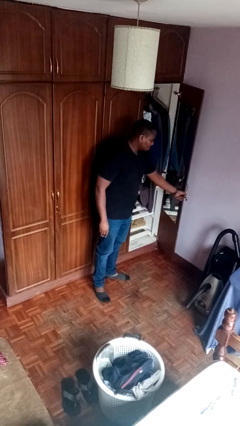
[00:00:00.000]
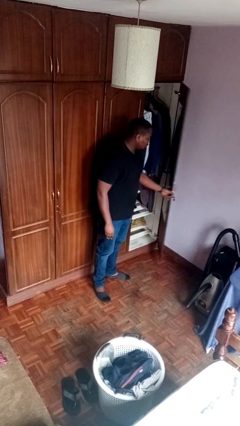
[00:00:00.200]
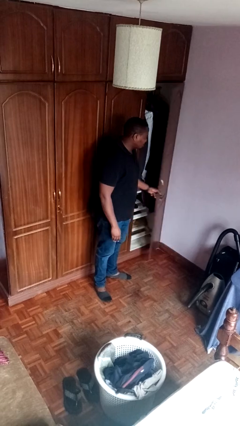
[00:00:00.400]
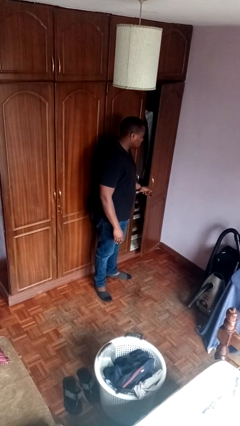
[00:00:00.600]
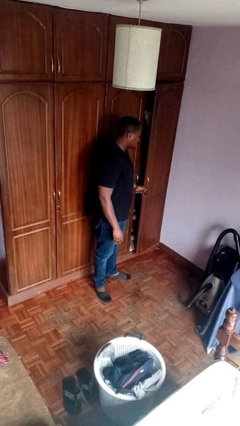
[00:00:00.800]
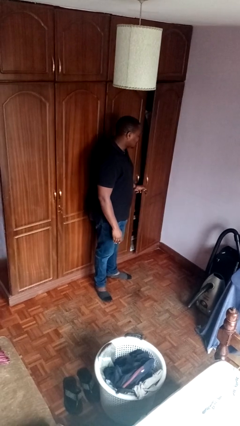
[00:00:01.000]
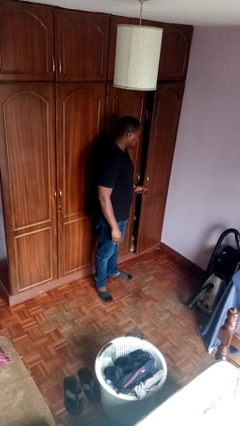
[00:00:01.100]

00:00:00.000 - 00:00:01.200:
person closes closet door

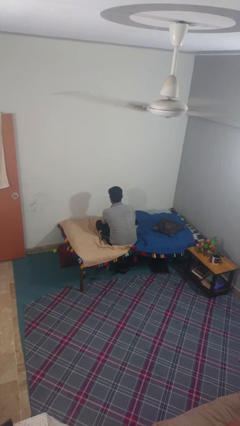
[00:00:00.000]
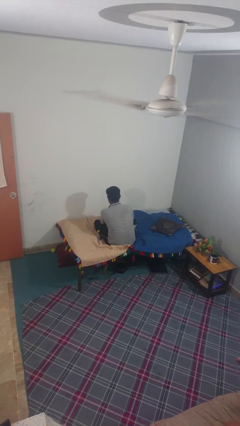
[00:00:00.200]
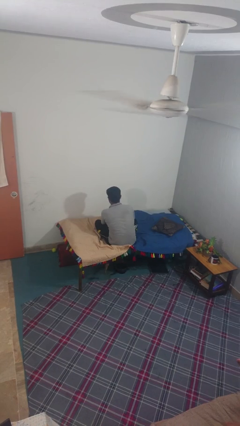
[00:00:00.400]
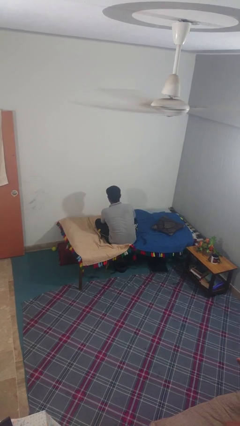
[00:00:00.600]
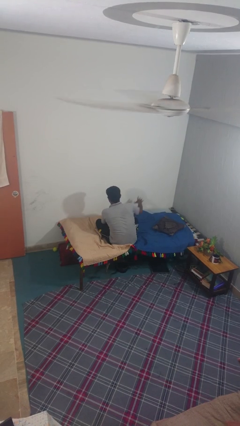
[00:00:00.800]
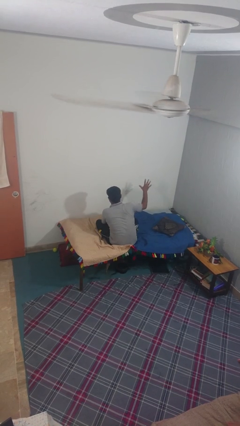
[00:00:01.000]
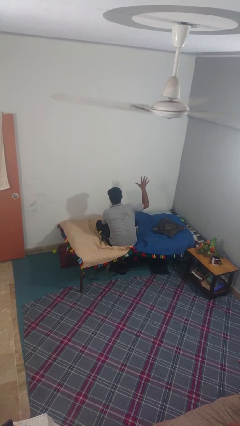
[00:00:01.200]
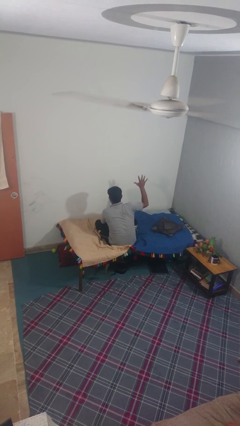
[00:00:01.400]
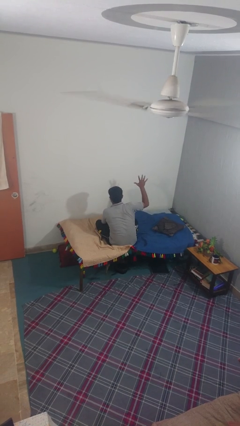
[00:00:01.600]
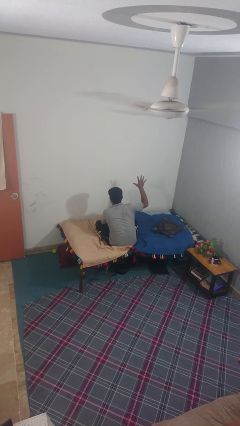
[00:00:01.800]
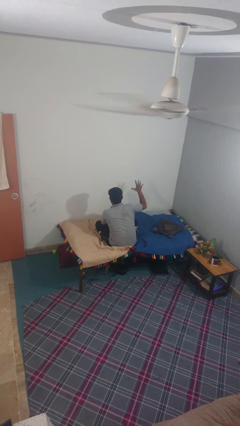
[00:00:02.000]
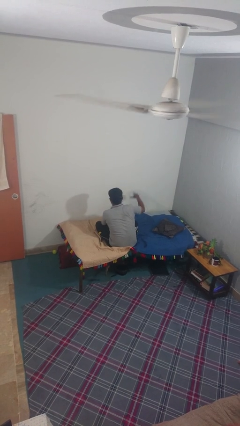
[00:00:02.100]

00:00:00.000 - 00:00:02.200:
person gestures number five

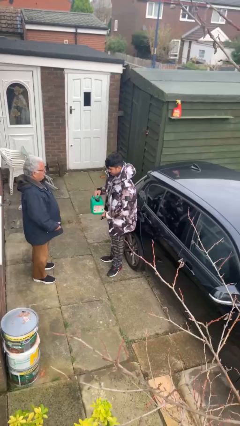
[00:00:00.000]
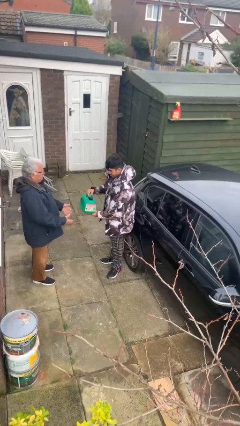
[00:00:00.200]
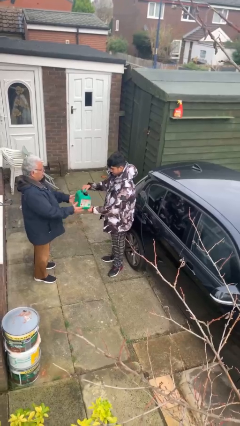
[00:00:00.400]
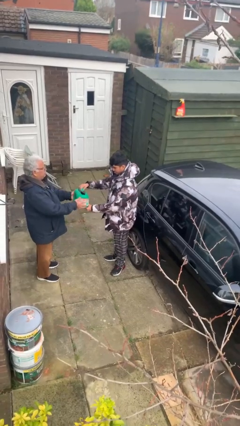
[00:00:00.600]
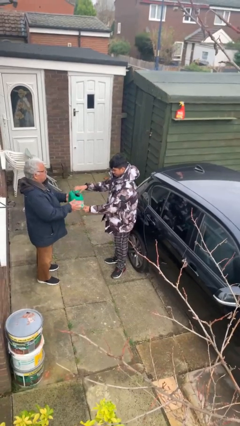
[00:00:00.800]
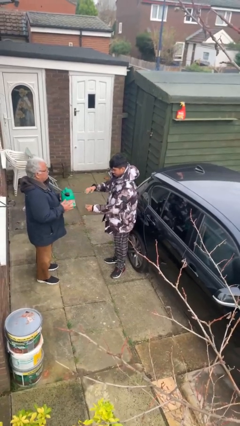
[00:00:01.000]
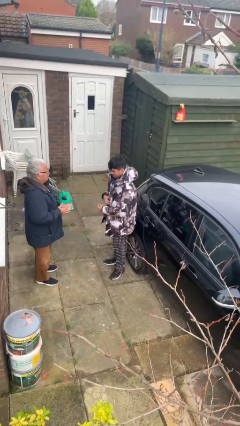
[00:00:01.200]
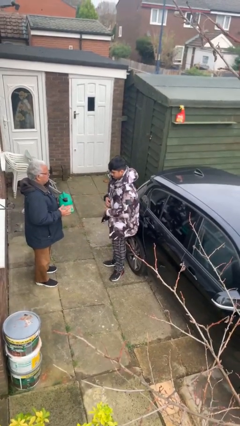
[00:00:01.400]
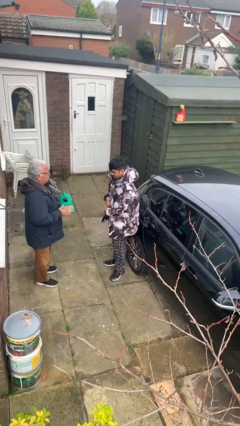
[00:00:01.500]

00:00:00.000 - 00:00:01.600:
person transfers object to person

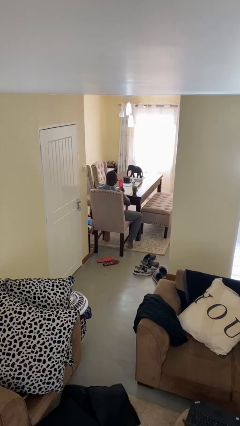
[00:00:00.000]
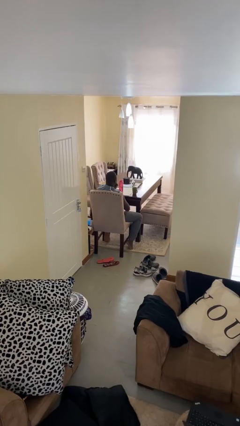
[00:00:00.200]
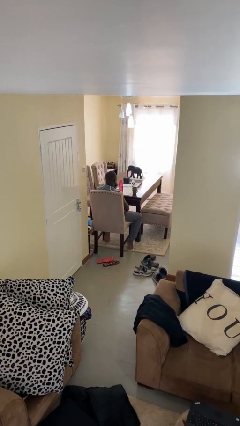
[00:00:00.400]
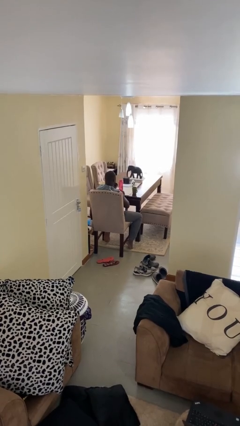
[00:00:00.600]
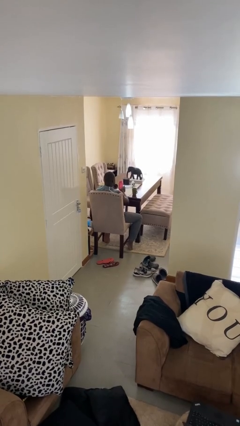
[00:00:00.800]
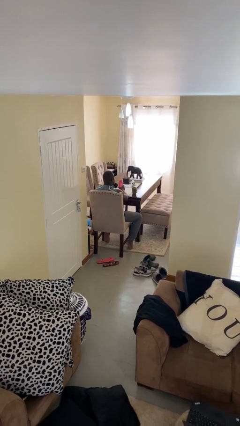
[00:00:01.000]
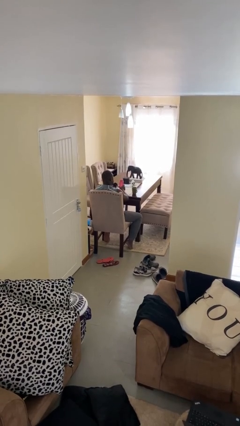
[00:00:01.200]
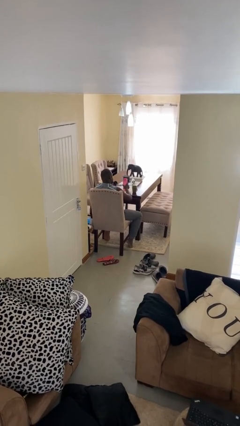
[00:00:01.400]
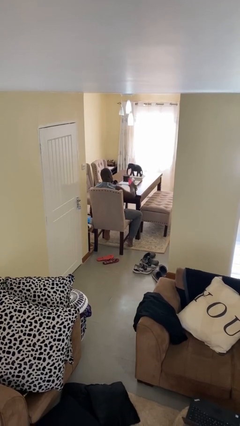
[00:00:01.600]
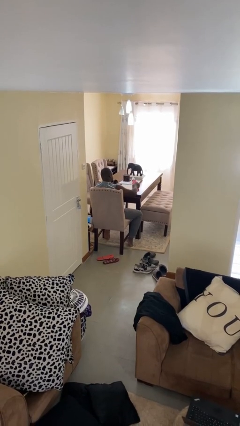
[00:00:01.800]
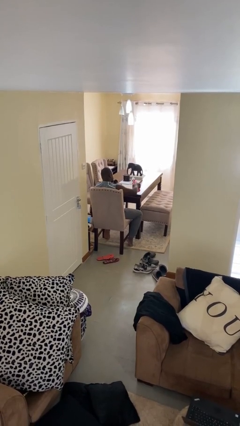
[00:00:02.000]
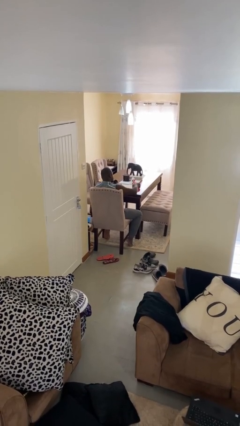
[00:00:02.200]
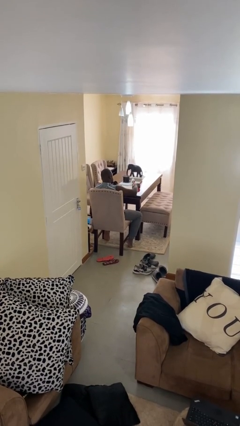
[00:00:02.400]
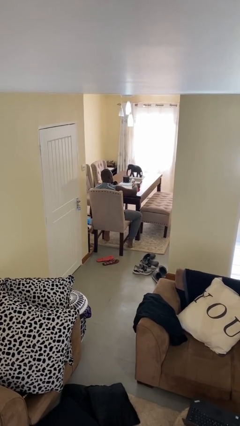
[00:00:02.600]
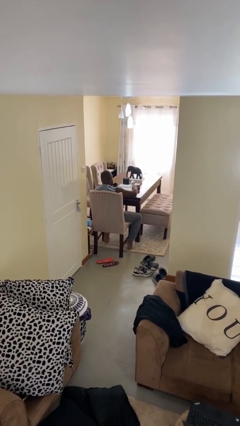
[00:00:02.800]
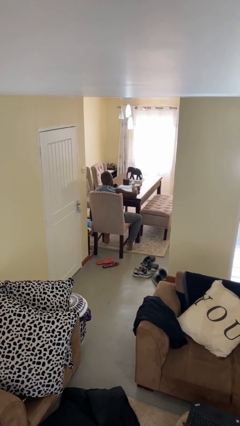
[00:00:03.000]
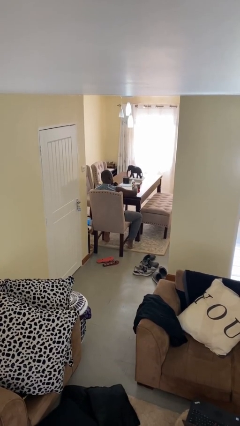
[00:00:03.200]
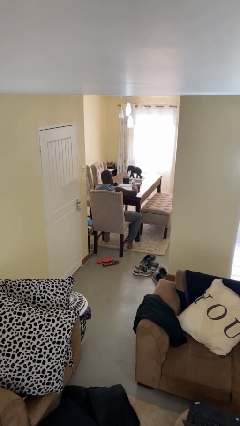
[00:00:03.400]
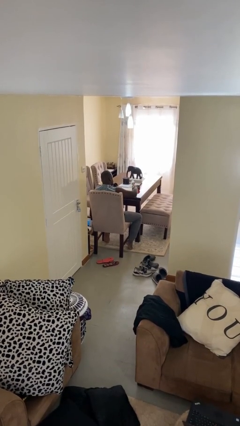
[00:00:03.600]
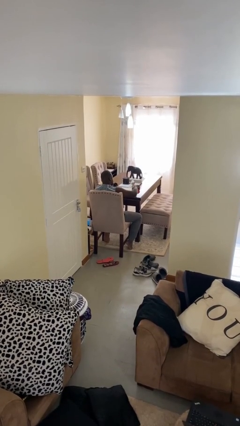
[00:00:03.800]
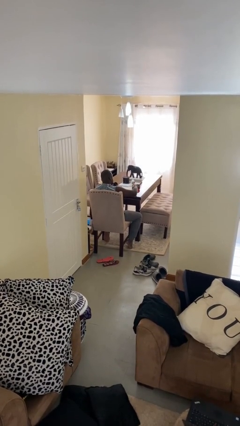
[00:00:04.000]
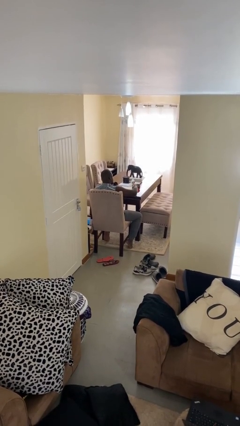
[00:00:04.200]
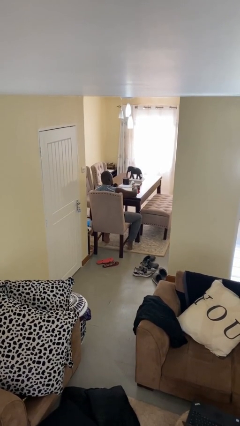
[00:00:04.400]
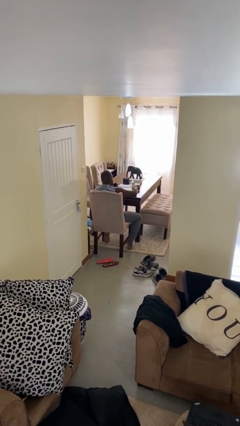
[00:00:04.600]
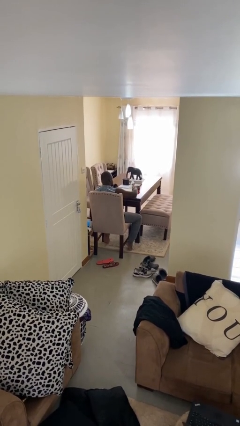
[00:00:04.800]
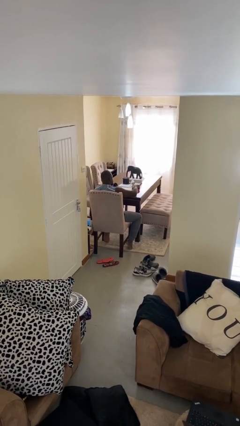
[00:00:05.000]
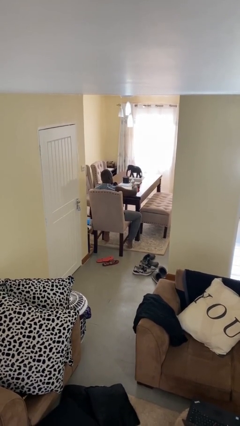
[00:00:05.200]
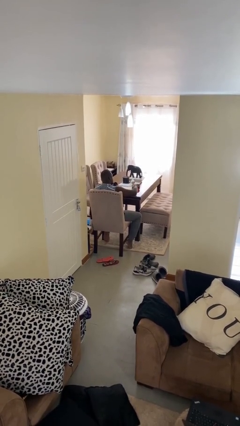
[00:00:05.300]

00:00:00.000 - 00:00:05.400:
person pours liquid into cup

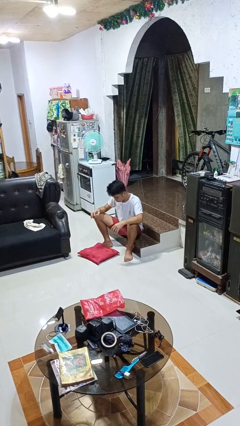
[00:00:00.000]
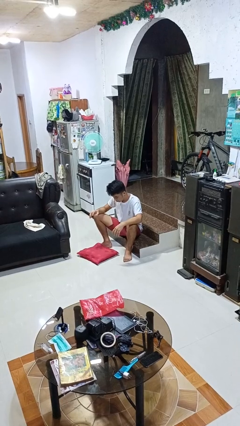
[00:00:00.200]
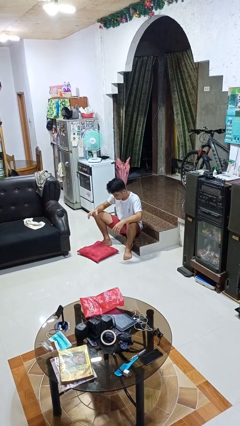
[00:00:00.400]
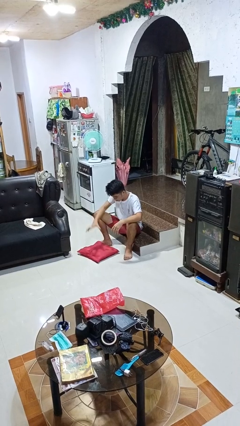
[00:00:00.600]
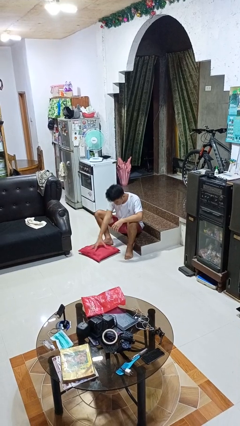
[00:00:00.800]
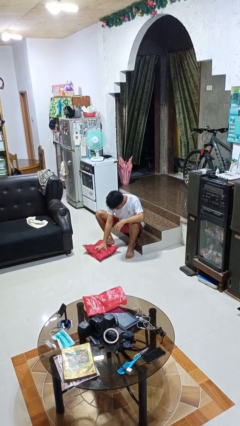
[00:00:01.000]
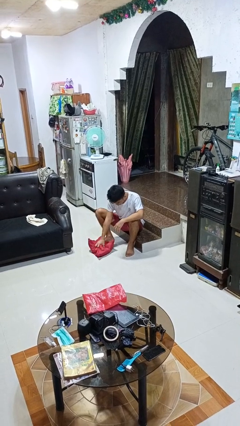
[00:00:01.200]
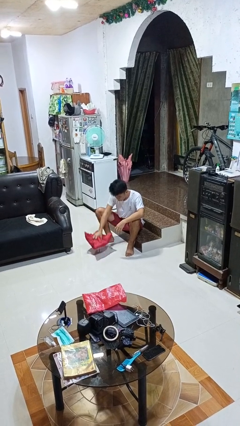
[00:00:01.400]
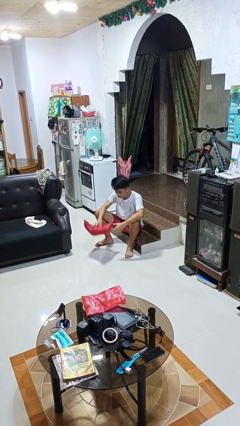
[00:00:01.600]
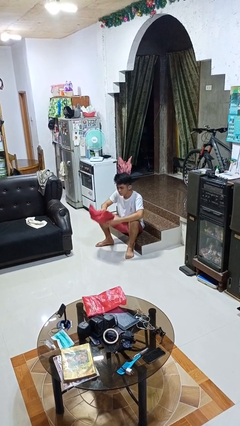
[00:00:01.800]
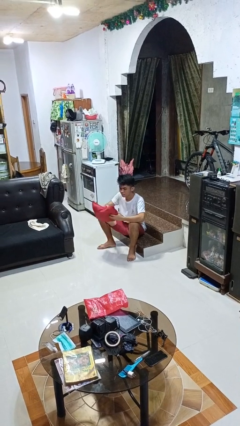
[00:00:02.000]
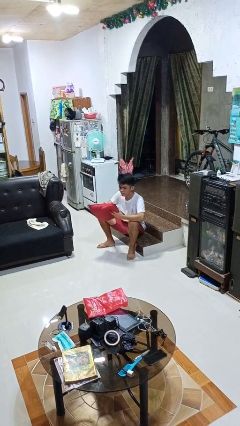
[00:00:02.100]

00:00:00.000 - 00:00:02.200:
person picks up object from floor

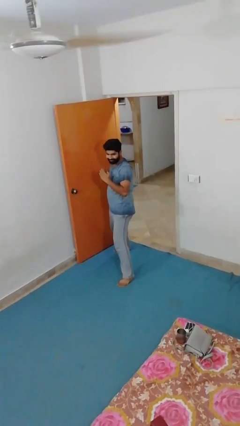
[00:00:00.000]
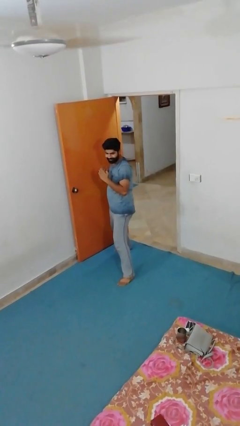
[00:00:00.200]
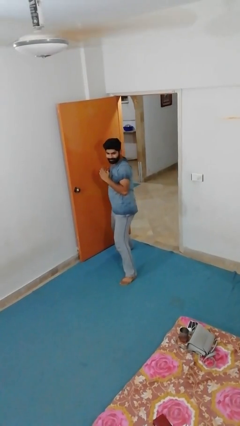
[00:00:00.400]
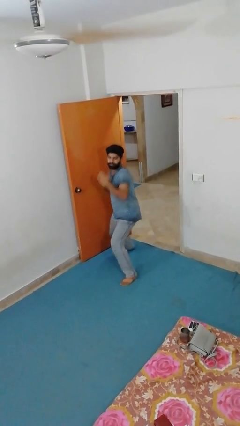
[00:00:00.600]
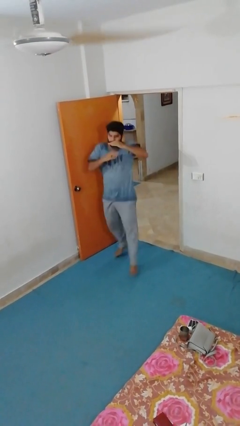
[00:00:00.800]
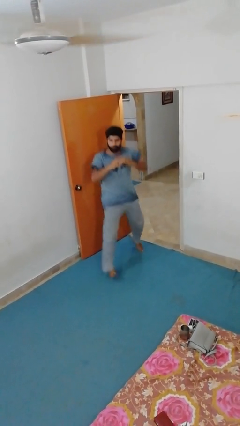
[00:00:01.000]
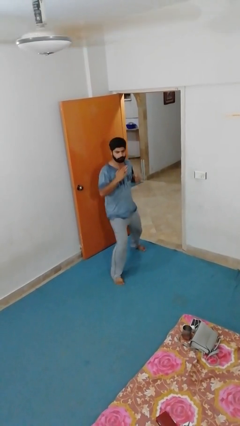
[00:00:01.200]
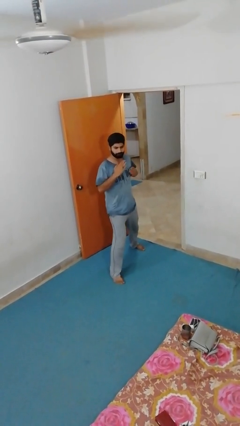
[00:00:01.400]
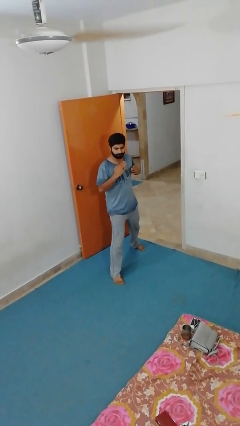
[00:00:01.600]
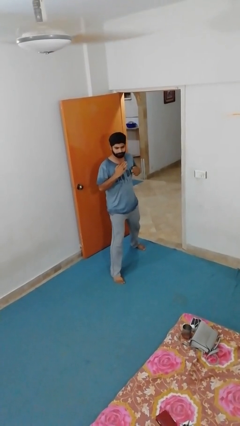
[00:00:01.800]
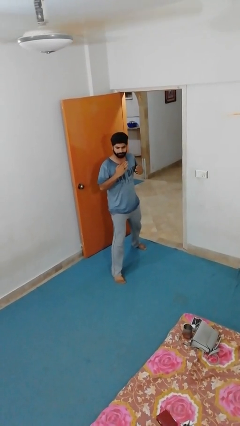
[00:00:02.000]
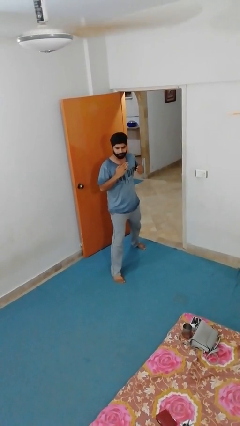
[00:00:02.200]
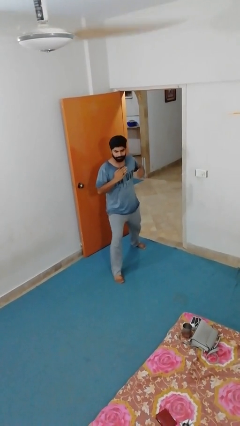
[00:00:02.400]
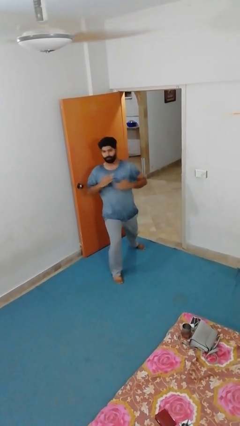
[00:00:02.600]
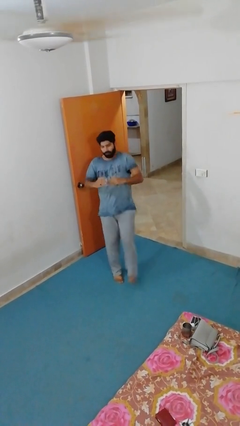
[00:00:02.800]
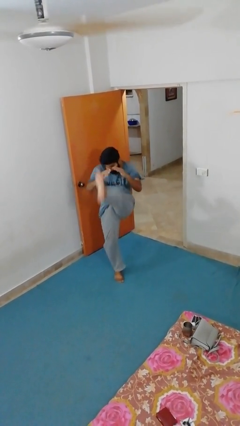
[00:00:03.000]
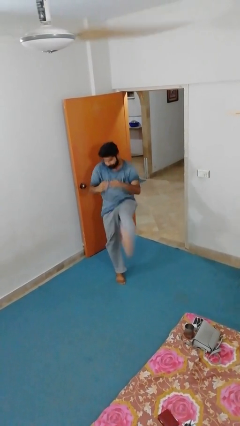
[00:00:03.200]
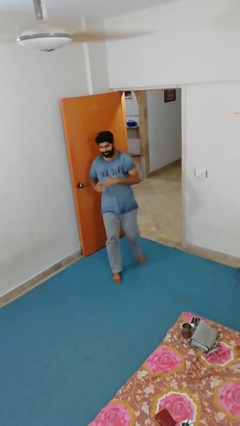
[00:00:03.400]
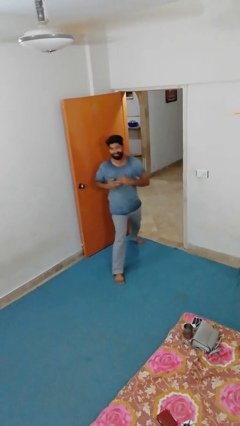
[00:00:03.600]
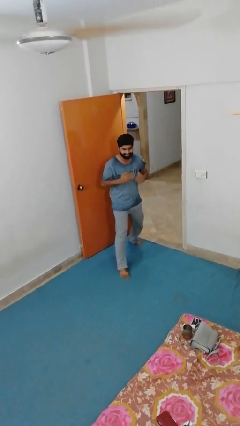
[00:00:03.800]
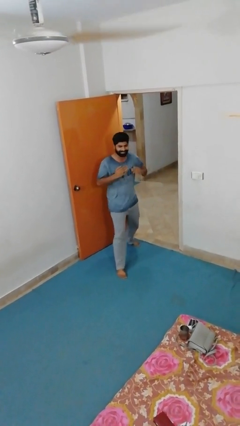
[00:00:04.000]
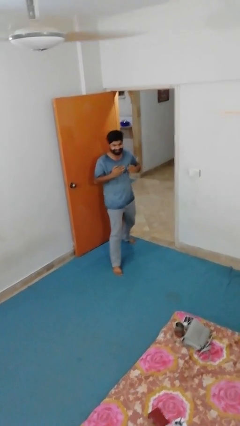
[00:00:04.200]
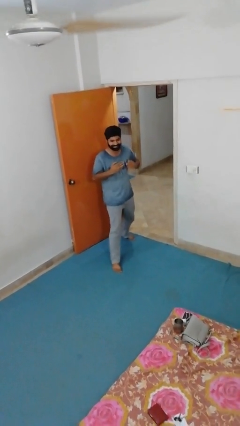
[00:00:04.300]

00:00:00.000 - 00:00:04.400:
person karate kicks
